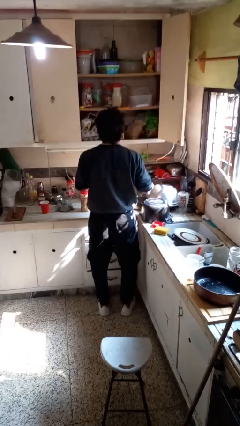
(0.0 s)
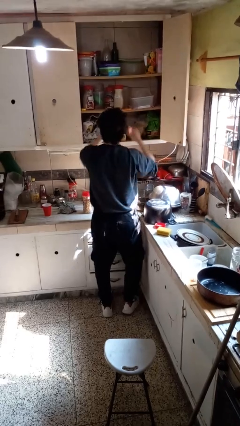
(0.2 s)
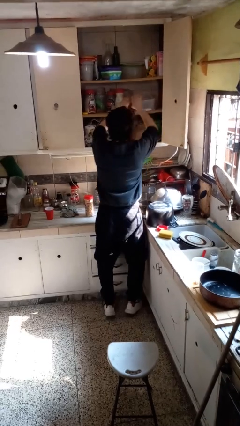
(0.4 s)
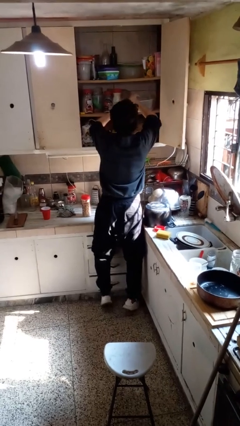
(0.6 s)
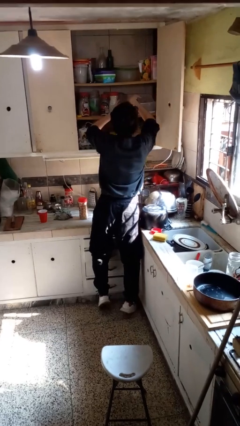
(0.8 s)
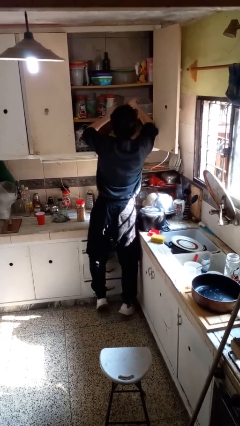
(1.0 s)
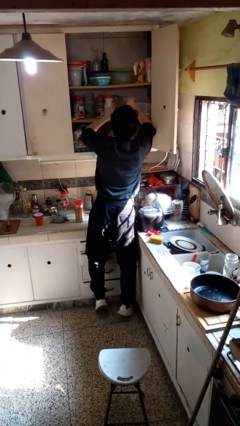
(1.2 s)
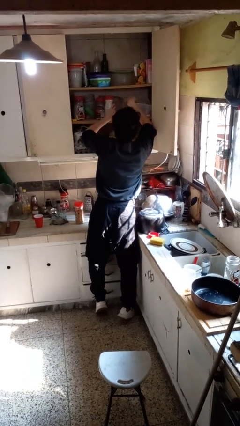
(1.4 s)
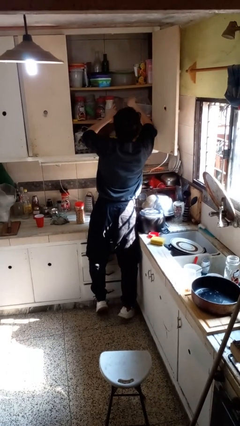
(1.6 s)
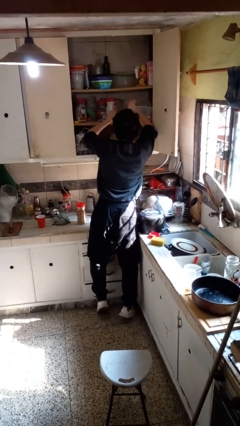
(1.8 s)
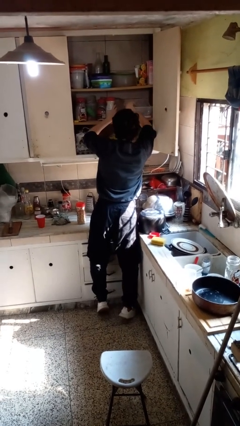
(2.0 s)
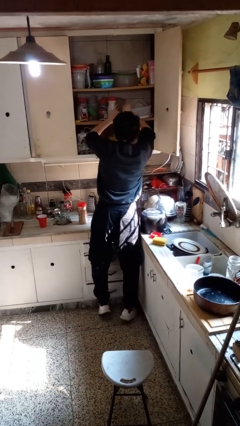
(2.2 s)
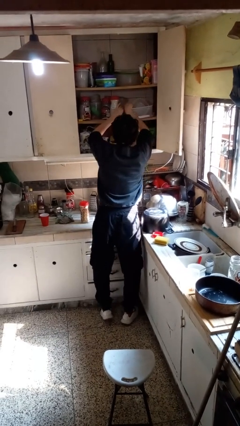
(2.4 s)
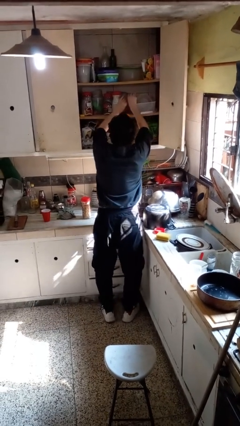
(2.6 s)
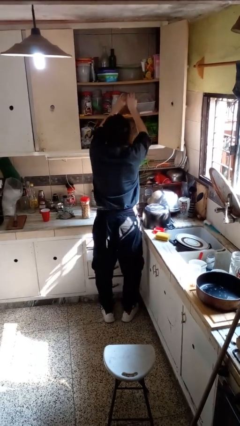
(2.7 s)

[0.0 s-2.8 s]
person searches in cabinet

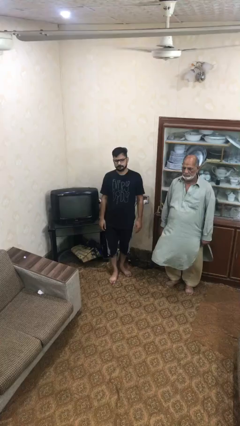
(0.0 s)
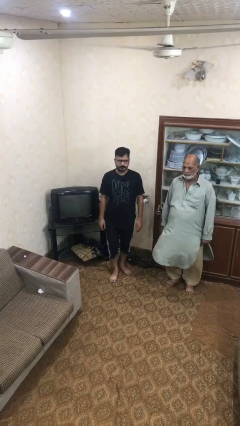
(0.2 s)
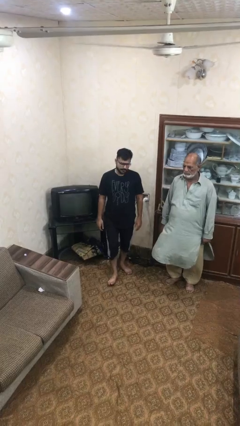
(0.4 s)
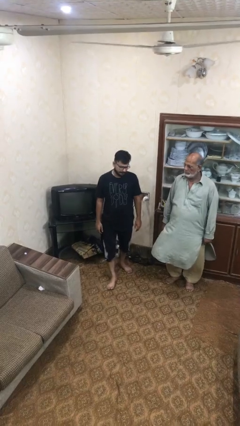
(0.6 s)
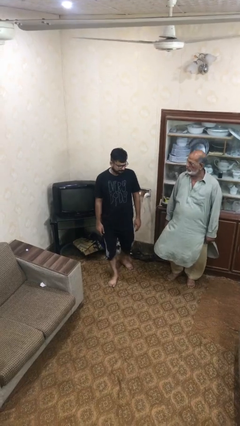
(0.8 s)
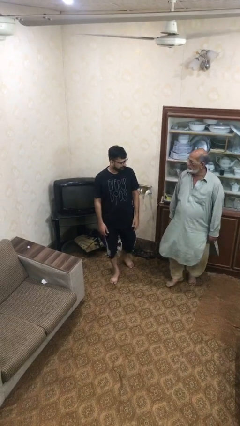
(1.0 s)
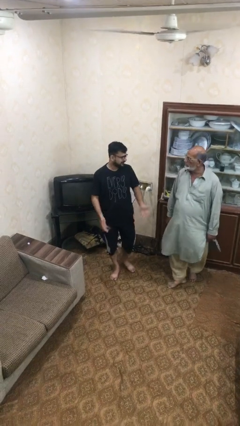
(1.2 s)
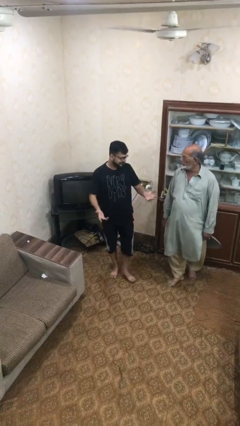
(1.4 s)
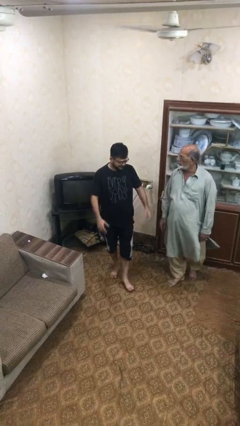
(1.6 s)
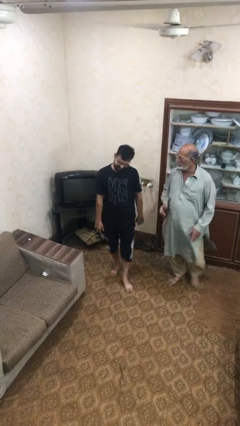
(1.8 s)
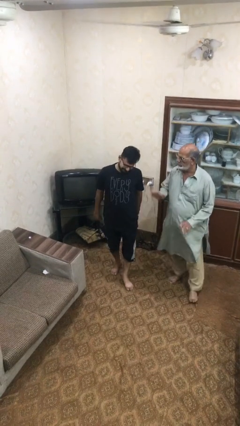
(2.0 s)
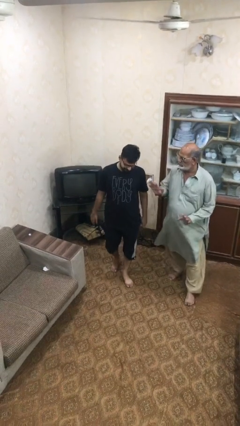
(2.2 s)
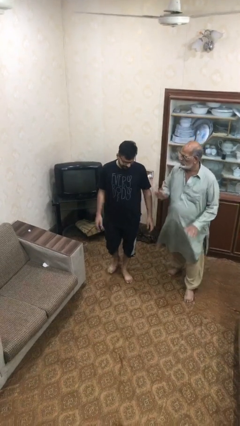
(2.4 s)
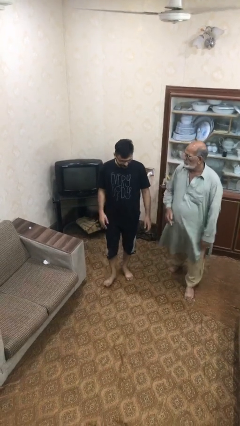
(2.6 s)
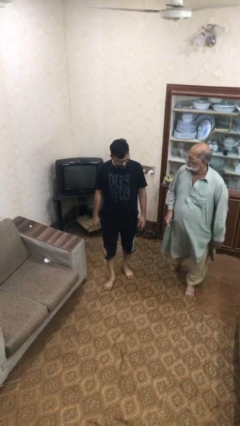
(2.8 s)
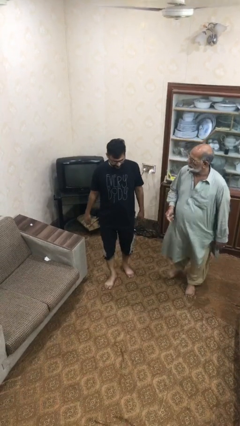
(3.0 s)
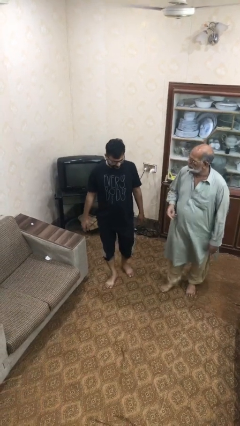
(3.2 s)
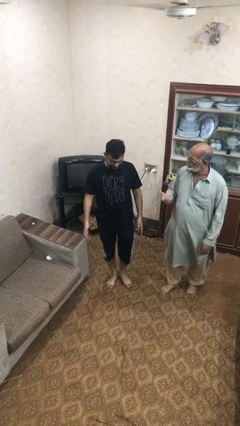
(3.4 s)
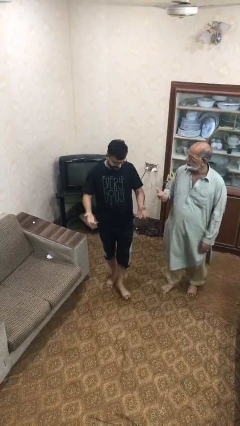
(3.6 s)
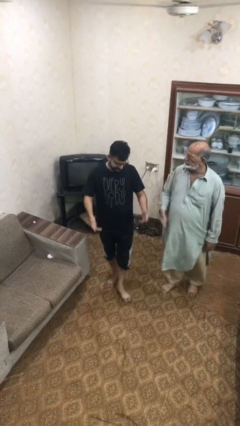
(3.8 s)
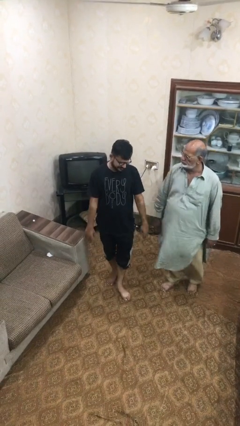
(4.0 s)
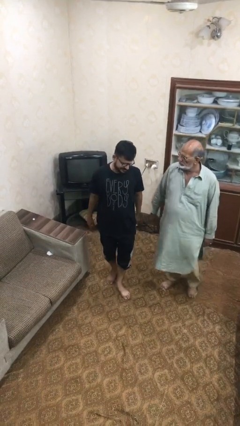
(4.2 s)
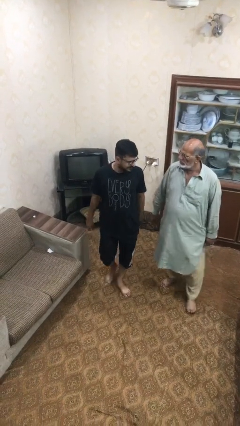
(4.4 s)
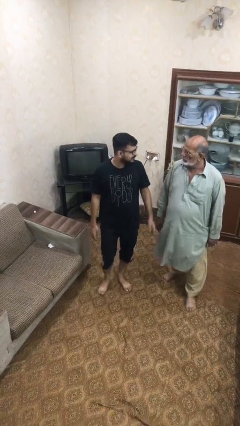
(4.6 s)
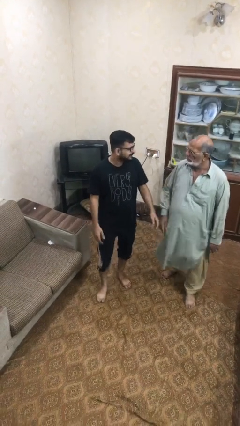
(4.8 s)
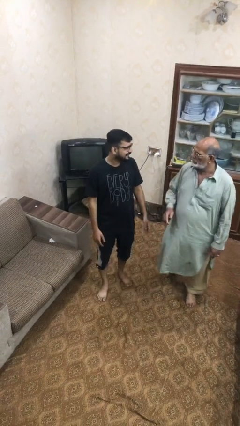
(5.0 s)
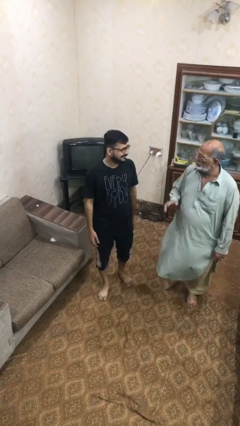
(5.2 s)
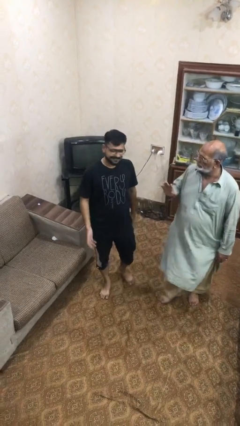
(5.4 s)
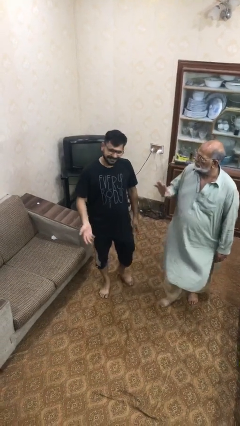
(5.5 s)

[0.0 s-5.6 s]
person talks to person

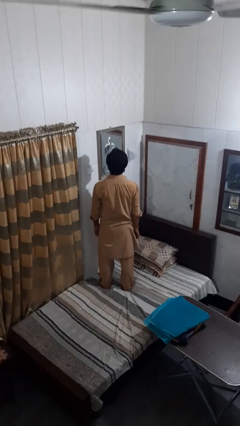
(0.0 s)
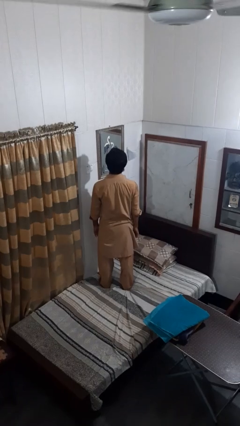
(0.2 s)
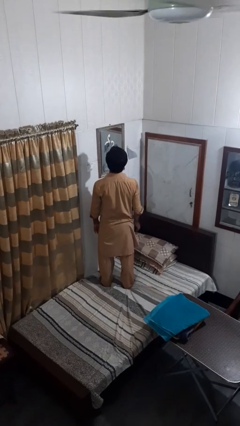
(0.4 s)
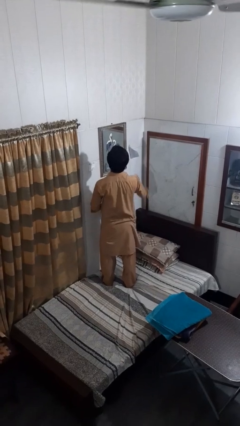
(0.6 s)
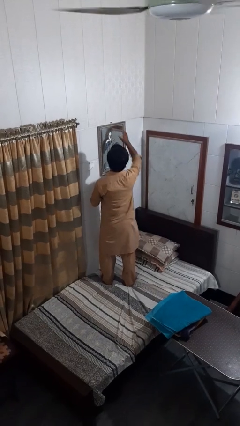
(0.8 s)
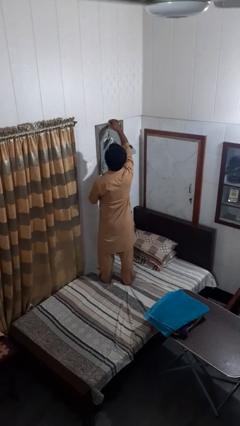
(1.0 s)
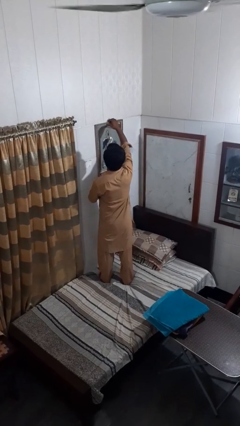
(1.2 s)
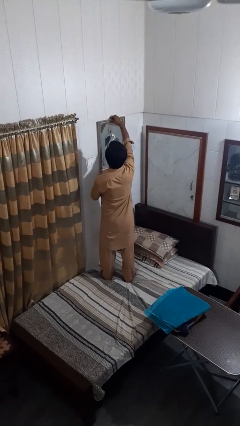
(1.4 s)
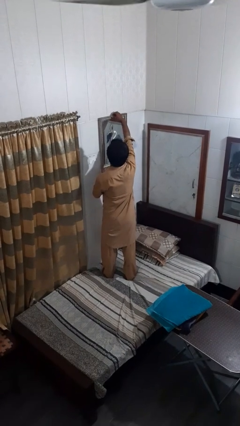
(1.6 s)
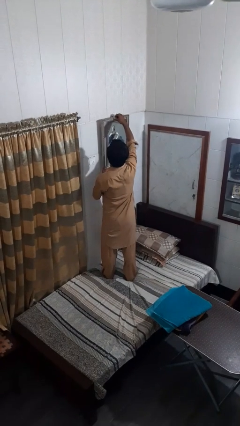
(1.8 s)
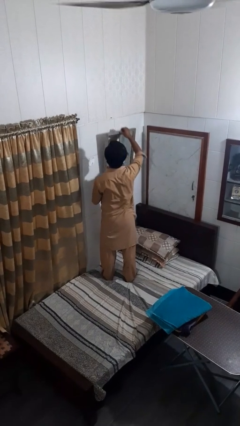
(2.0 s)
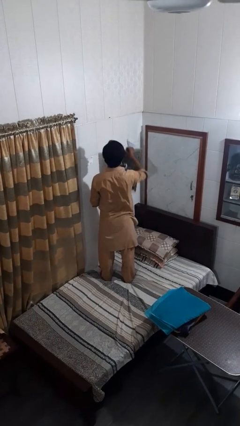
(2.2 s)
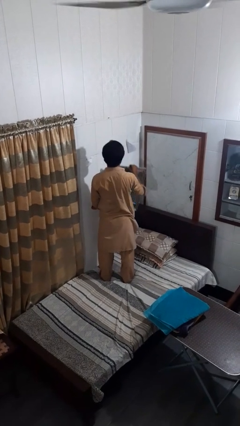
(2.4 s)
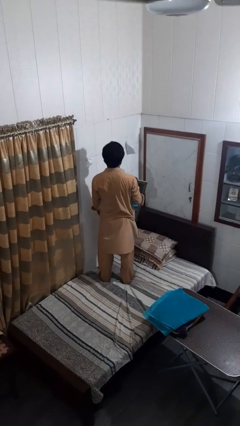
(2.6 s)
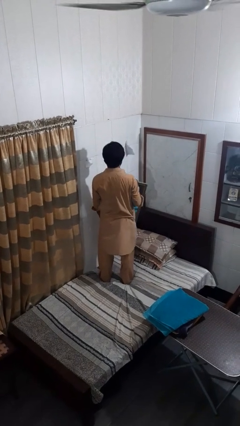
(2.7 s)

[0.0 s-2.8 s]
person takes down picture frame

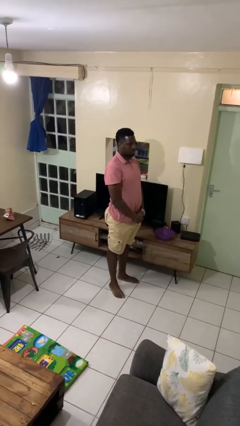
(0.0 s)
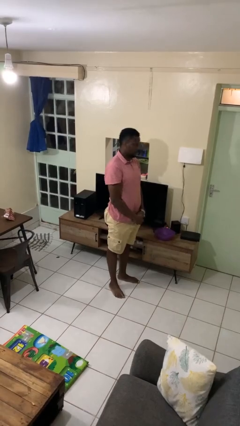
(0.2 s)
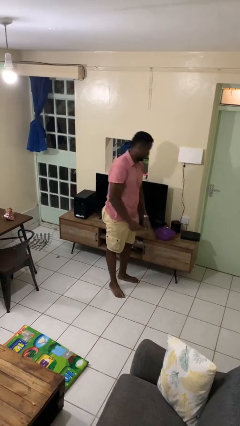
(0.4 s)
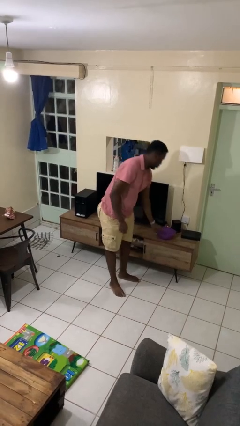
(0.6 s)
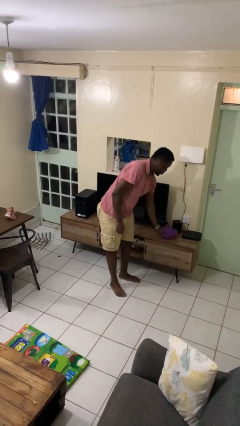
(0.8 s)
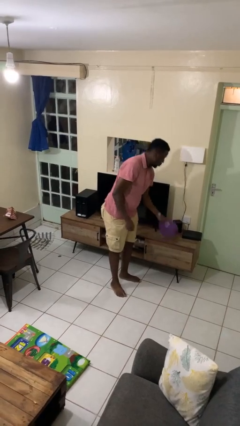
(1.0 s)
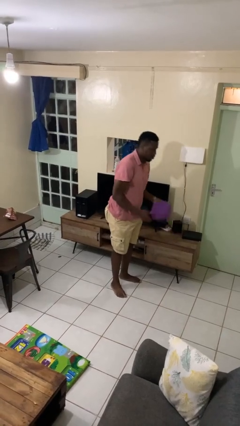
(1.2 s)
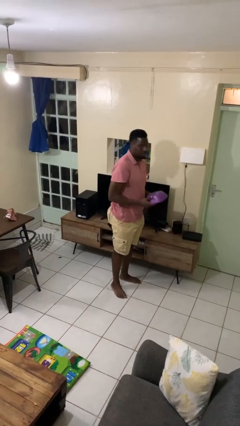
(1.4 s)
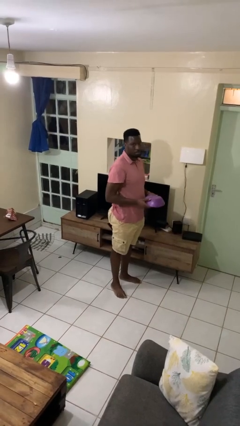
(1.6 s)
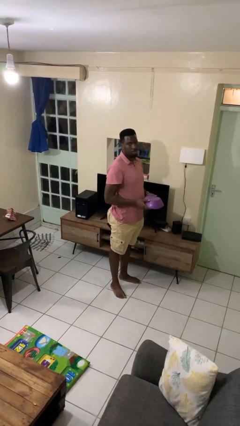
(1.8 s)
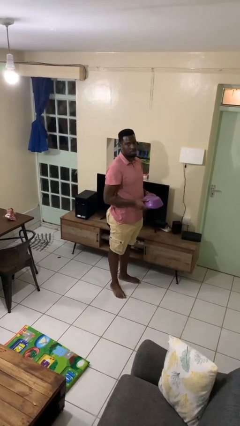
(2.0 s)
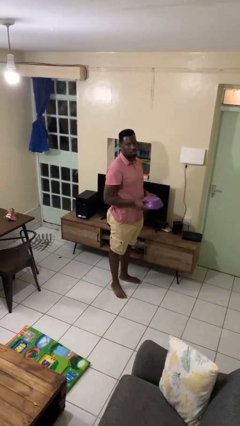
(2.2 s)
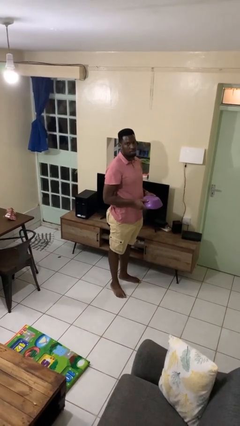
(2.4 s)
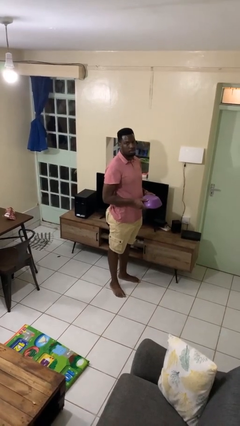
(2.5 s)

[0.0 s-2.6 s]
person picks up object from countertop

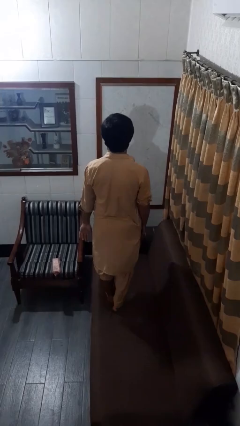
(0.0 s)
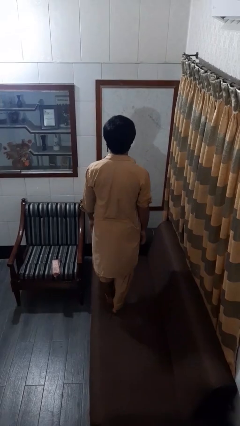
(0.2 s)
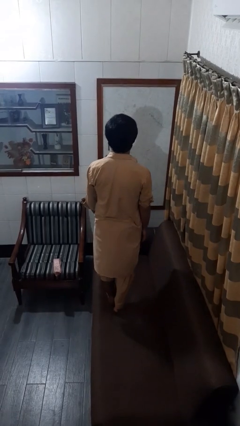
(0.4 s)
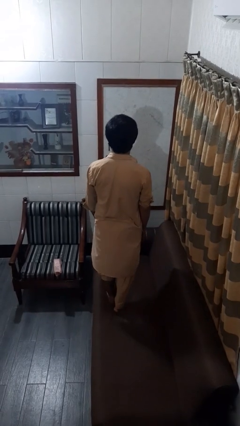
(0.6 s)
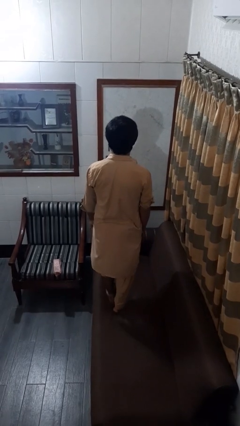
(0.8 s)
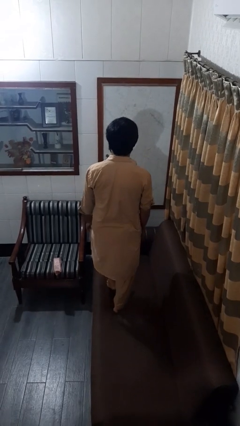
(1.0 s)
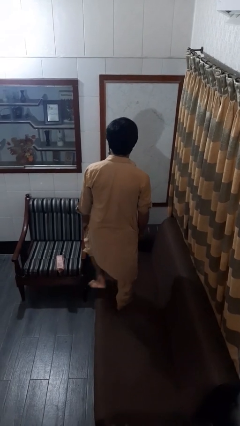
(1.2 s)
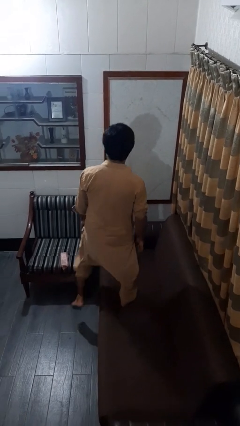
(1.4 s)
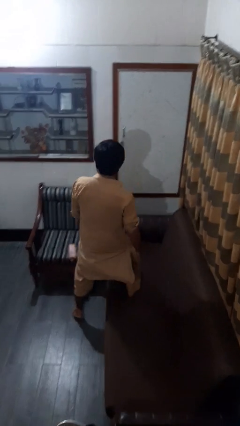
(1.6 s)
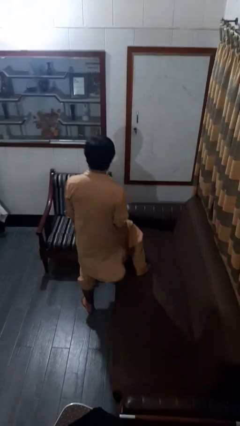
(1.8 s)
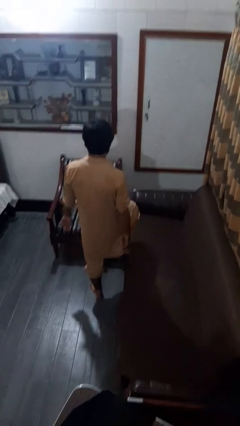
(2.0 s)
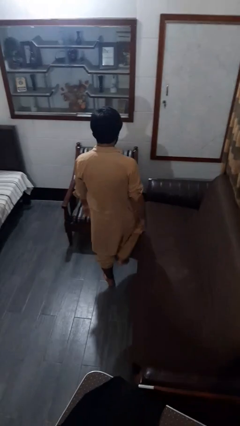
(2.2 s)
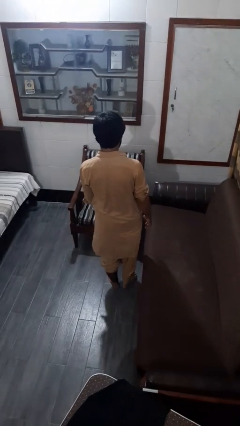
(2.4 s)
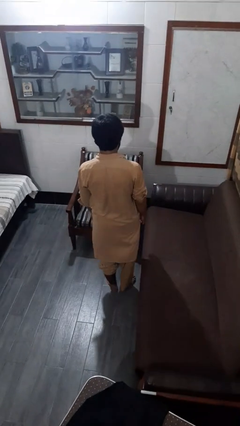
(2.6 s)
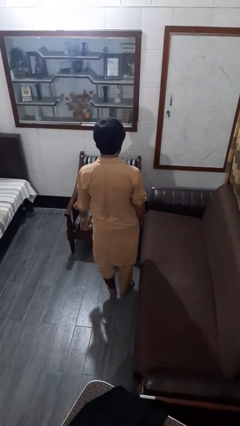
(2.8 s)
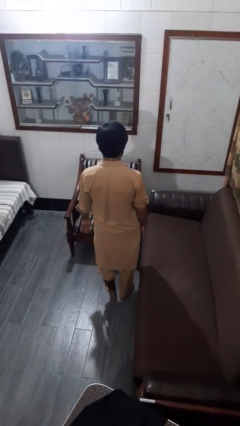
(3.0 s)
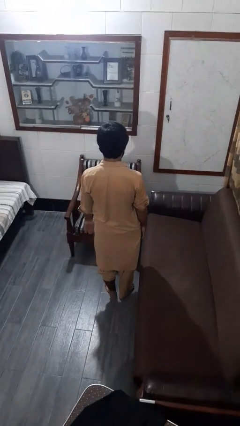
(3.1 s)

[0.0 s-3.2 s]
person climbs off couch

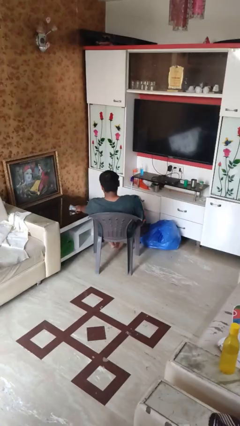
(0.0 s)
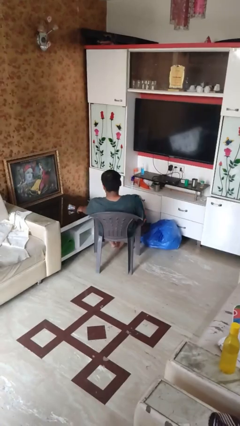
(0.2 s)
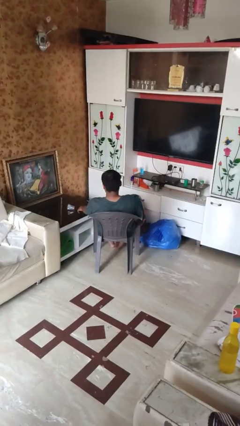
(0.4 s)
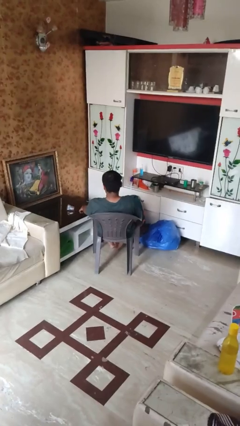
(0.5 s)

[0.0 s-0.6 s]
person knocks over glass

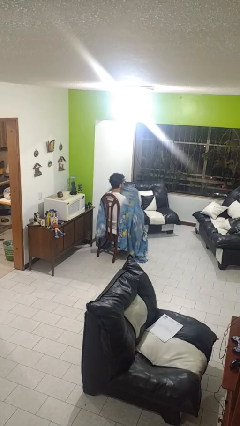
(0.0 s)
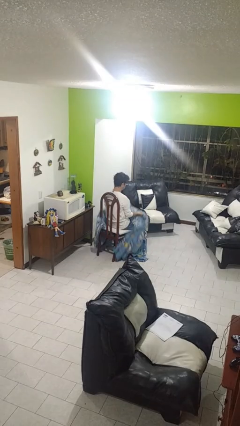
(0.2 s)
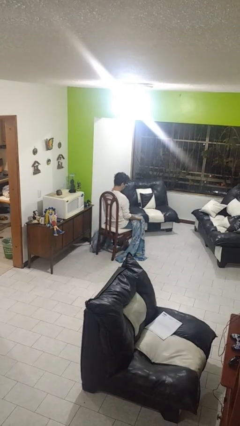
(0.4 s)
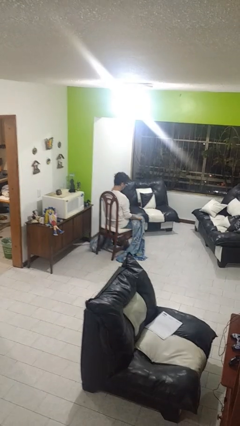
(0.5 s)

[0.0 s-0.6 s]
person uncovers with blanket
